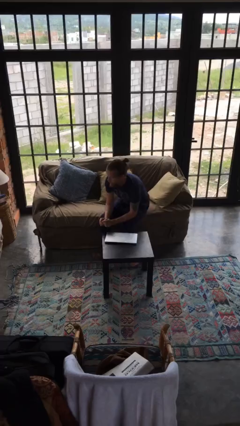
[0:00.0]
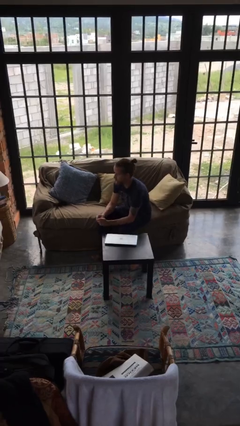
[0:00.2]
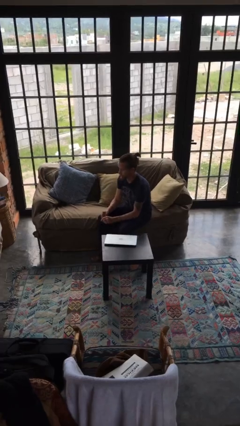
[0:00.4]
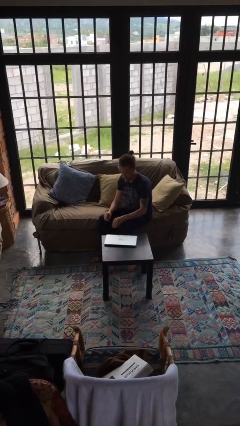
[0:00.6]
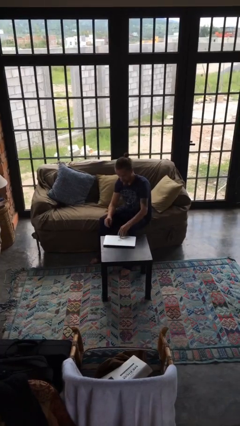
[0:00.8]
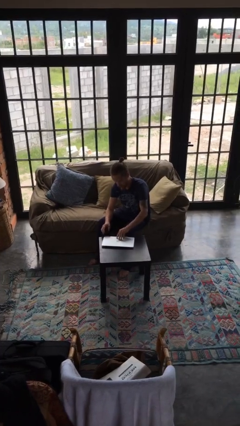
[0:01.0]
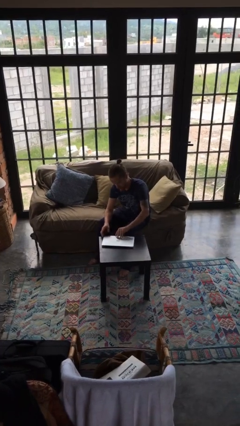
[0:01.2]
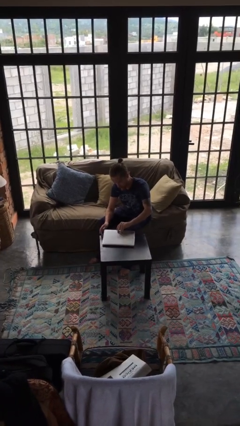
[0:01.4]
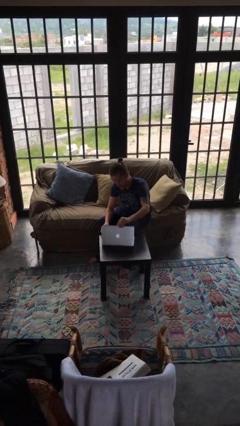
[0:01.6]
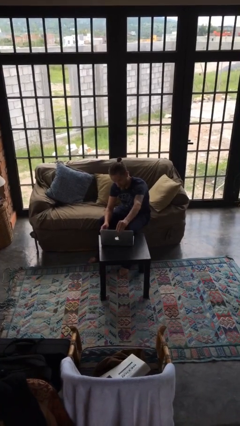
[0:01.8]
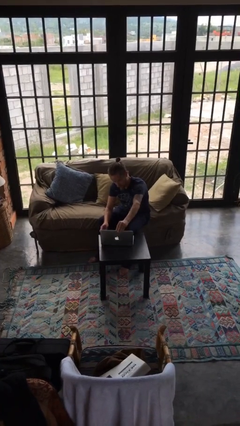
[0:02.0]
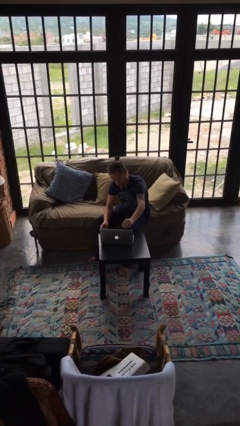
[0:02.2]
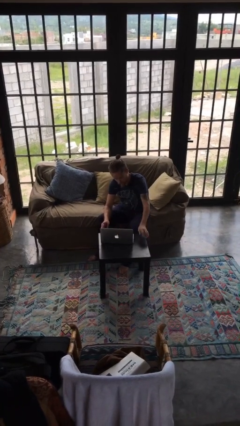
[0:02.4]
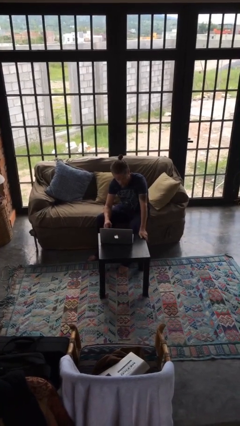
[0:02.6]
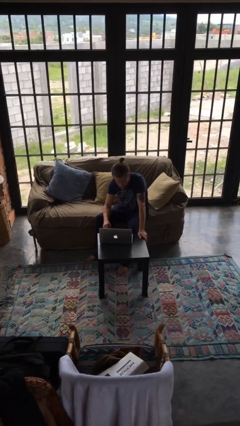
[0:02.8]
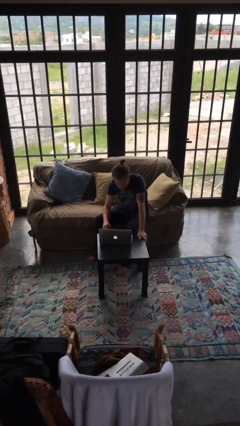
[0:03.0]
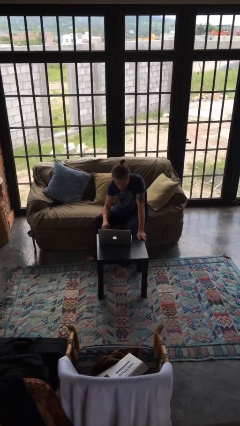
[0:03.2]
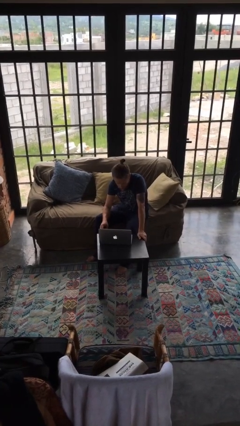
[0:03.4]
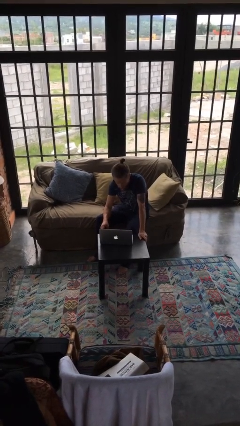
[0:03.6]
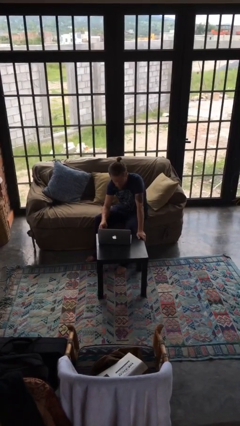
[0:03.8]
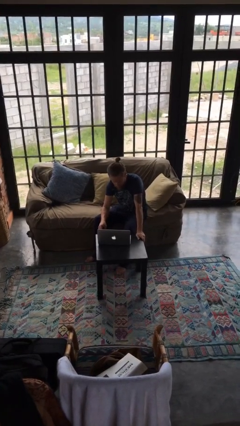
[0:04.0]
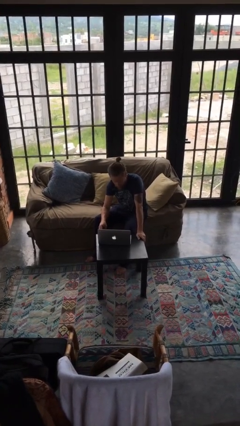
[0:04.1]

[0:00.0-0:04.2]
person opens laptop

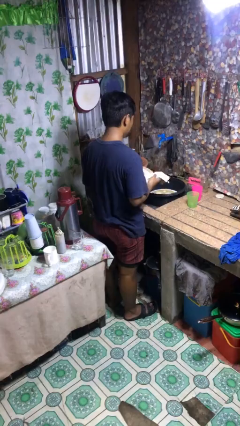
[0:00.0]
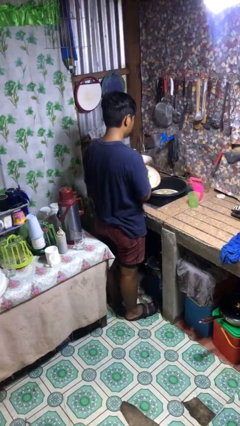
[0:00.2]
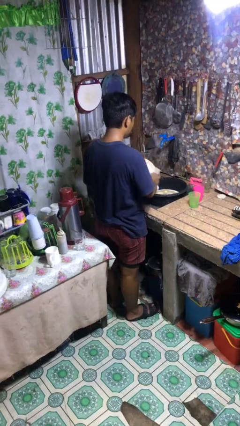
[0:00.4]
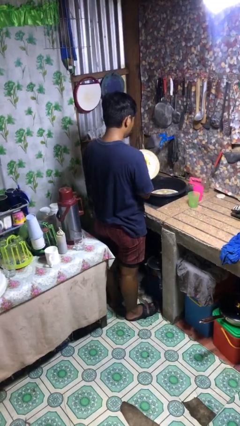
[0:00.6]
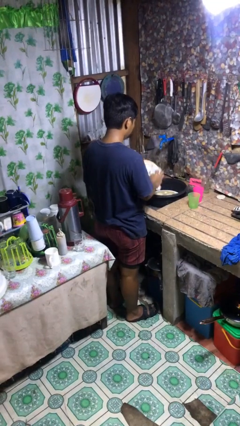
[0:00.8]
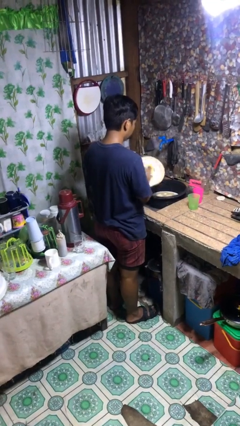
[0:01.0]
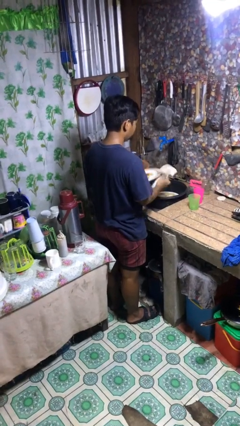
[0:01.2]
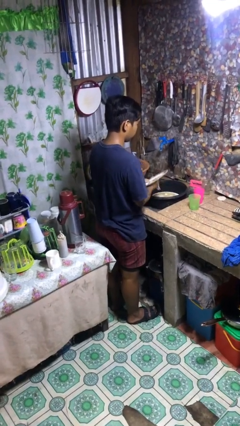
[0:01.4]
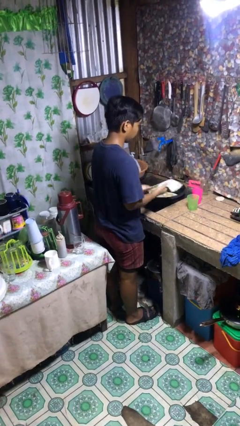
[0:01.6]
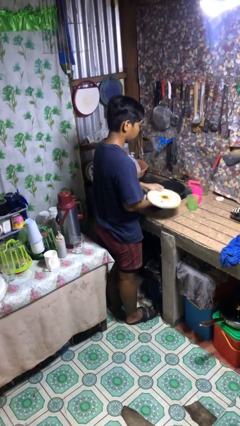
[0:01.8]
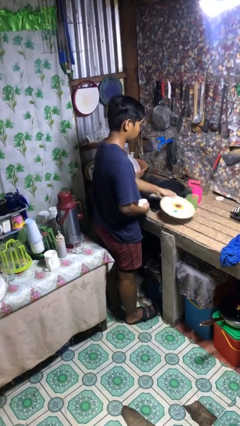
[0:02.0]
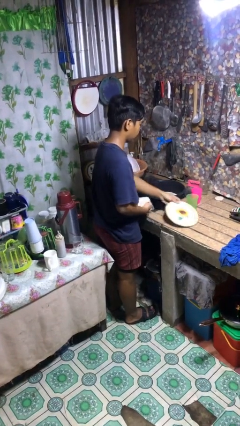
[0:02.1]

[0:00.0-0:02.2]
person dries dish

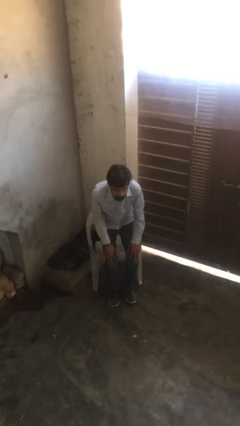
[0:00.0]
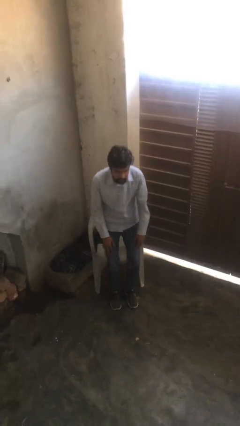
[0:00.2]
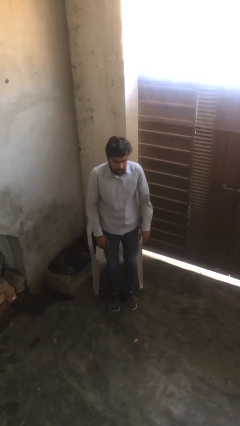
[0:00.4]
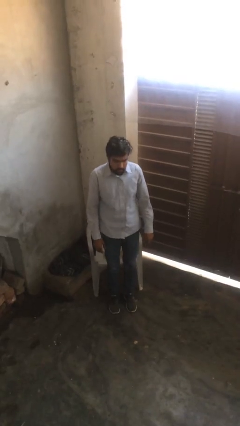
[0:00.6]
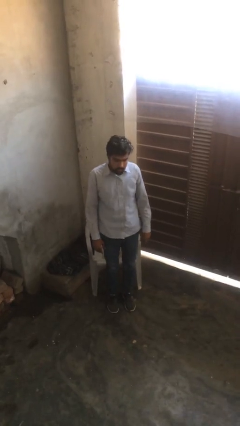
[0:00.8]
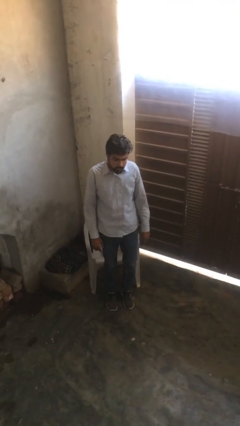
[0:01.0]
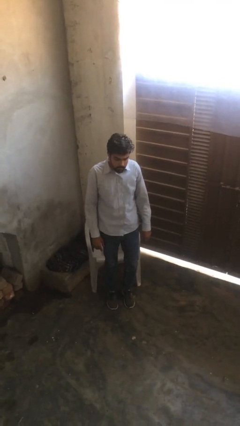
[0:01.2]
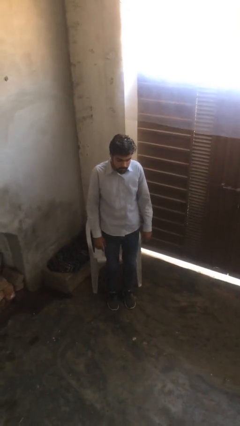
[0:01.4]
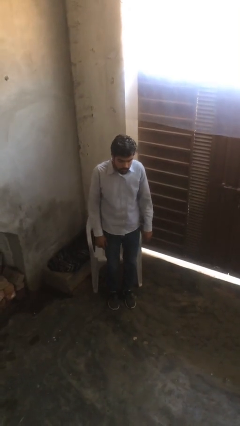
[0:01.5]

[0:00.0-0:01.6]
person stands up

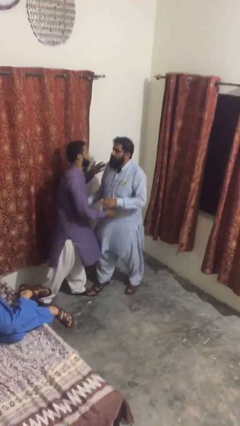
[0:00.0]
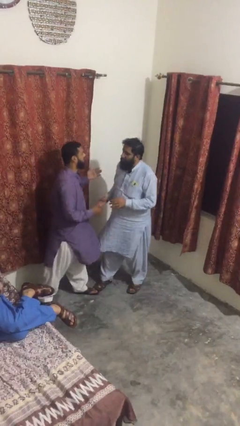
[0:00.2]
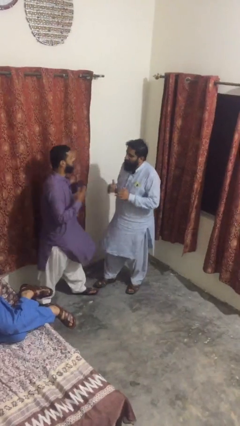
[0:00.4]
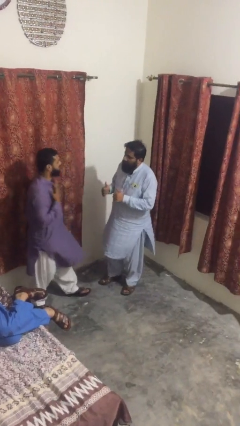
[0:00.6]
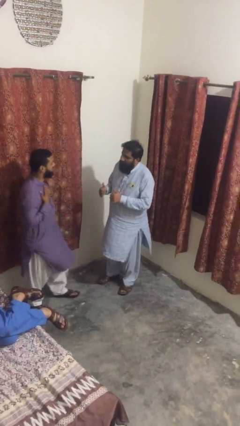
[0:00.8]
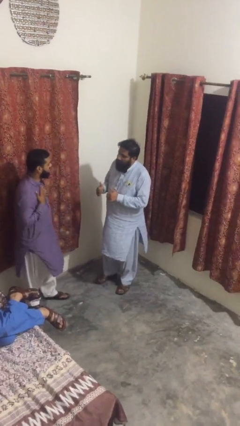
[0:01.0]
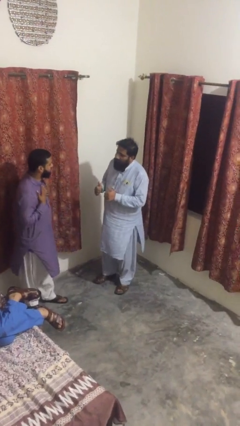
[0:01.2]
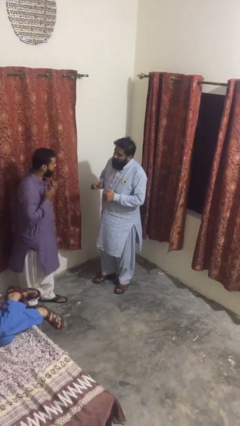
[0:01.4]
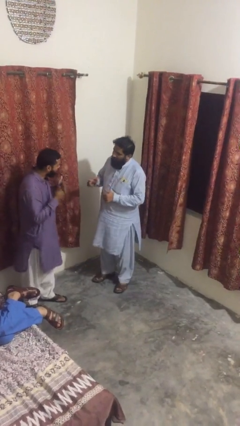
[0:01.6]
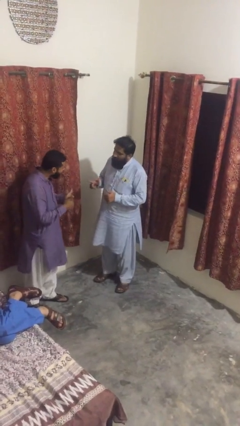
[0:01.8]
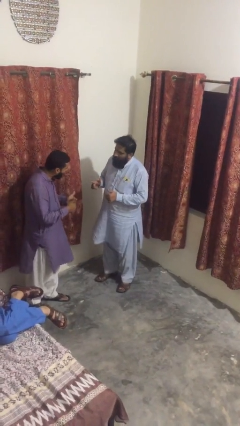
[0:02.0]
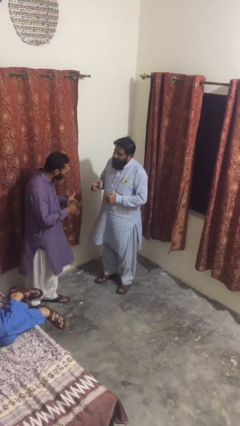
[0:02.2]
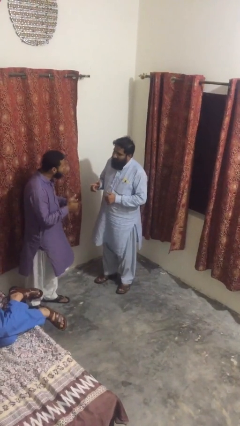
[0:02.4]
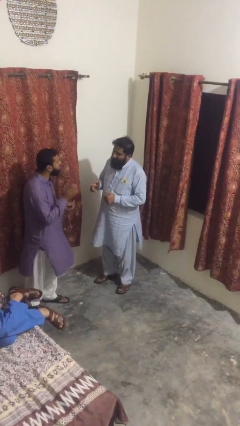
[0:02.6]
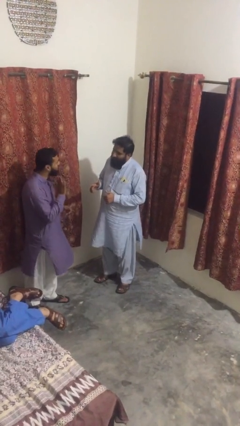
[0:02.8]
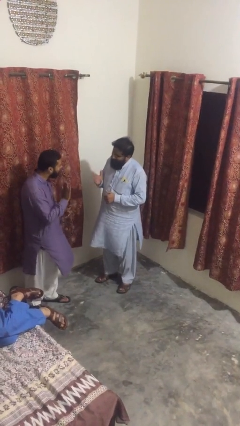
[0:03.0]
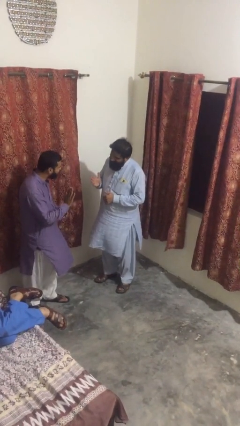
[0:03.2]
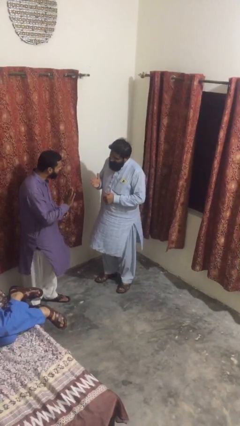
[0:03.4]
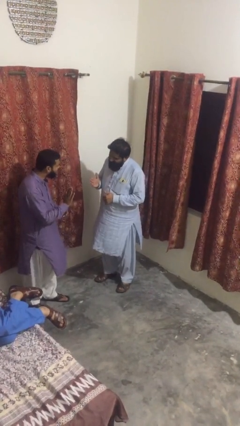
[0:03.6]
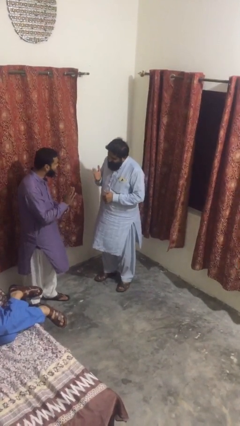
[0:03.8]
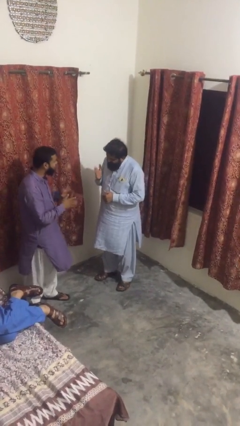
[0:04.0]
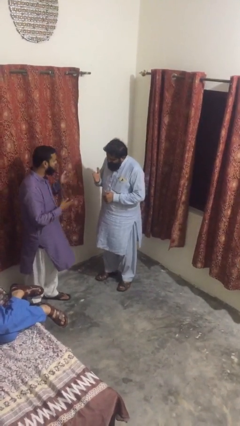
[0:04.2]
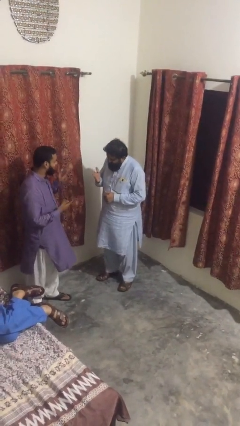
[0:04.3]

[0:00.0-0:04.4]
person talks to person

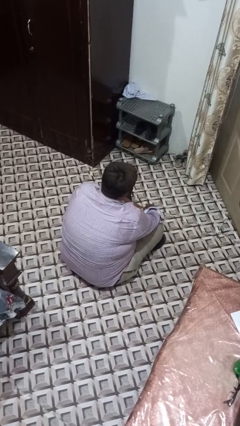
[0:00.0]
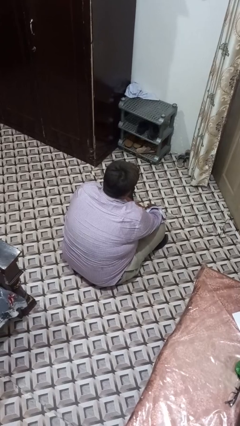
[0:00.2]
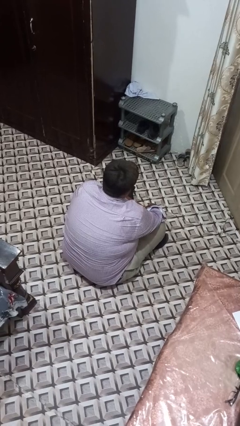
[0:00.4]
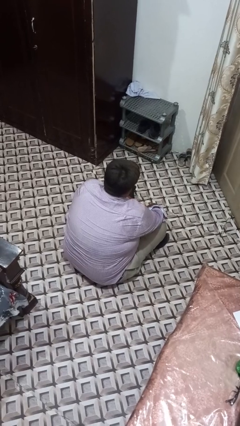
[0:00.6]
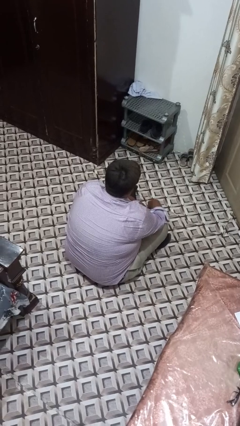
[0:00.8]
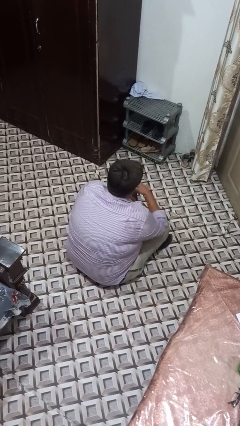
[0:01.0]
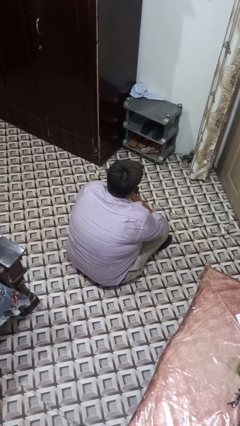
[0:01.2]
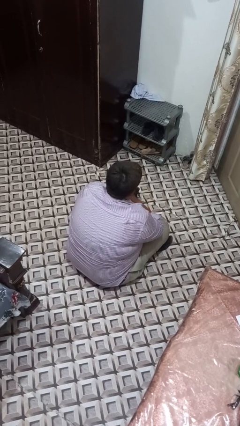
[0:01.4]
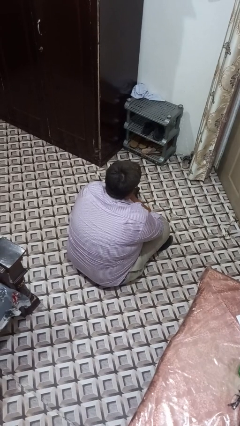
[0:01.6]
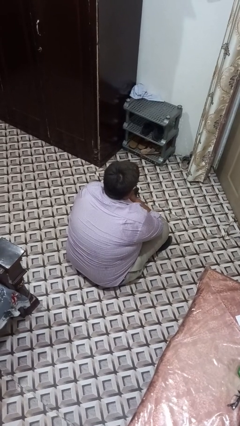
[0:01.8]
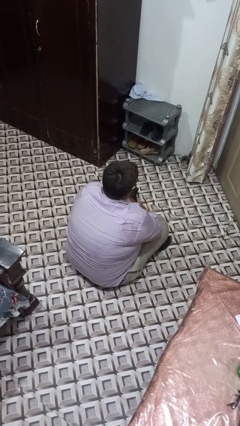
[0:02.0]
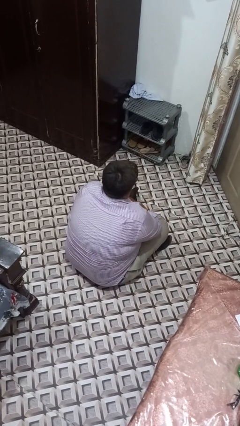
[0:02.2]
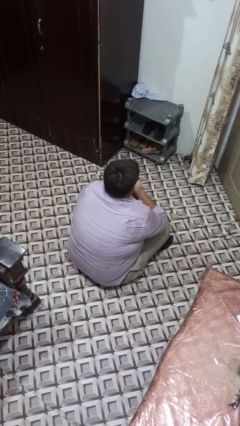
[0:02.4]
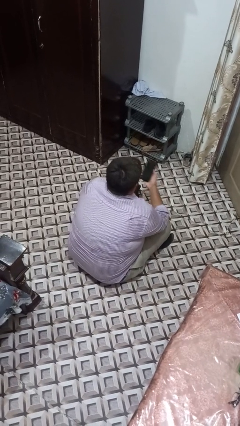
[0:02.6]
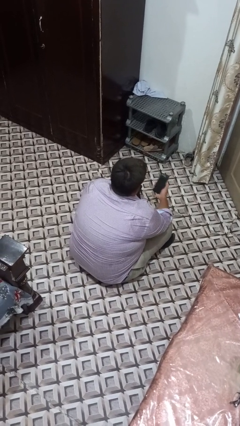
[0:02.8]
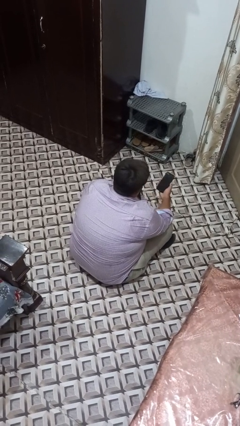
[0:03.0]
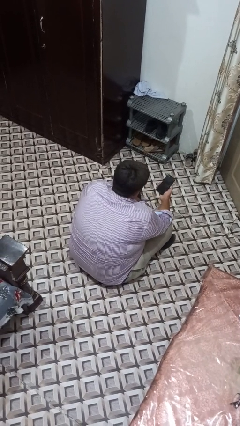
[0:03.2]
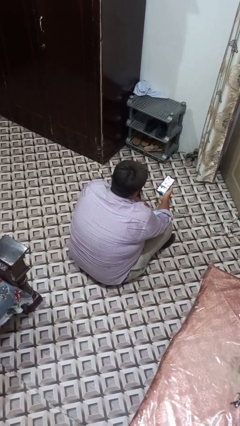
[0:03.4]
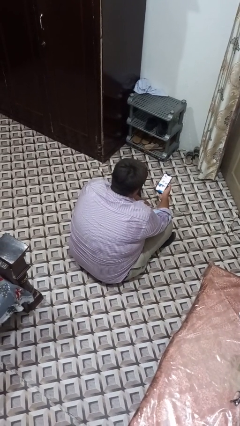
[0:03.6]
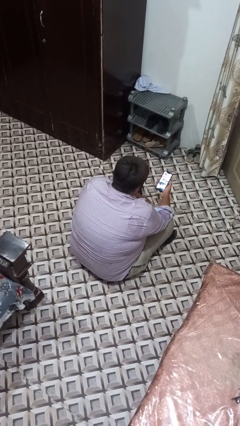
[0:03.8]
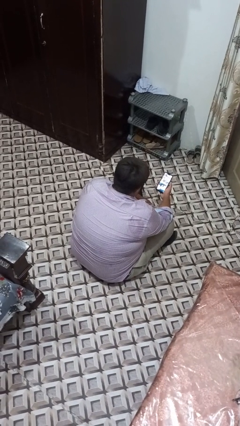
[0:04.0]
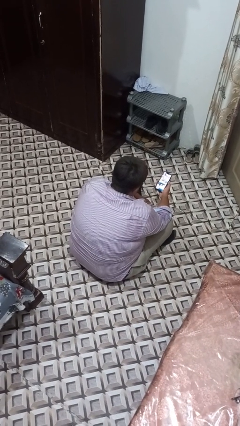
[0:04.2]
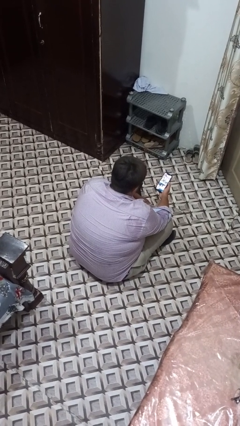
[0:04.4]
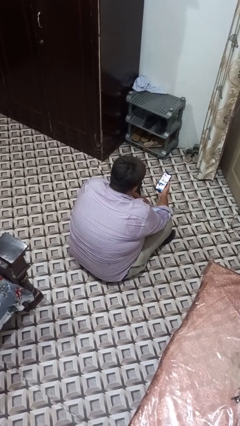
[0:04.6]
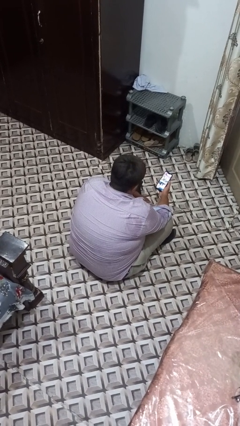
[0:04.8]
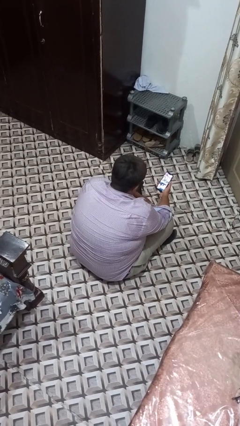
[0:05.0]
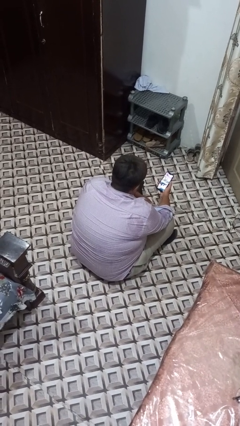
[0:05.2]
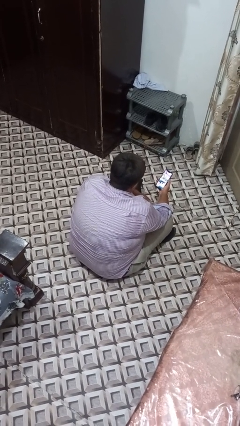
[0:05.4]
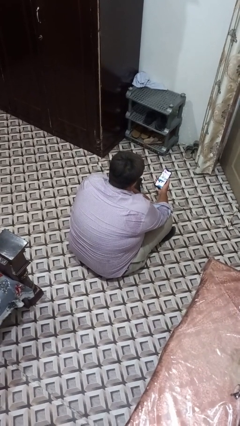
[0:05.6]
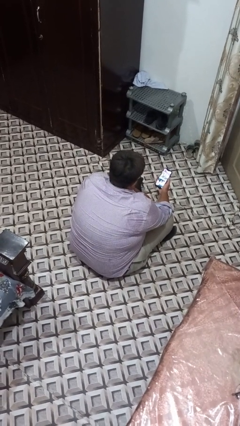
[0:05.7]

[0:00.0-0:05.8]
person takes phone from pocket
